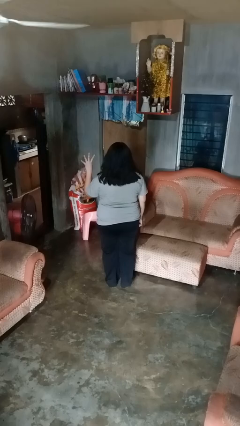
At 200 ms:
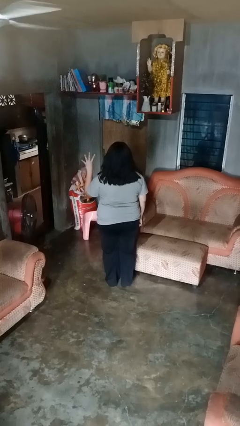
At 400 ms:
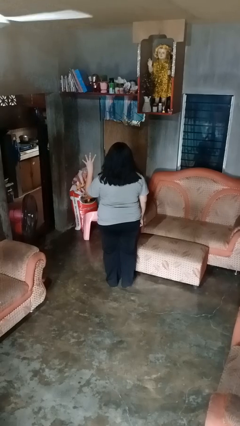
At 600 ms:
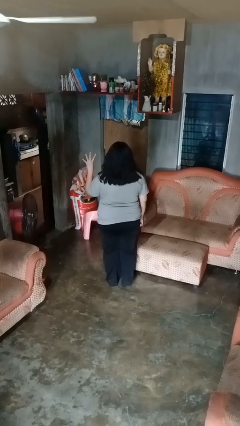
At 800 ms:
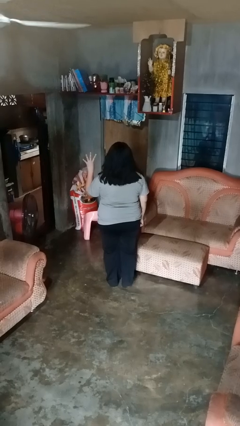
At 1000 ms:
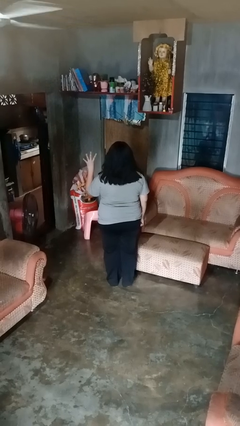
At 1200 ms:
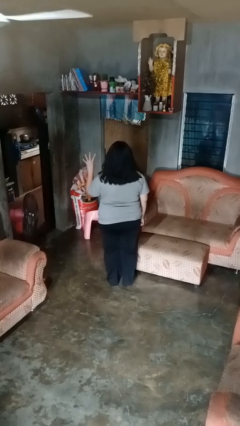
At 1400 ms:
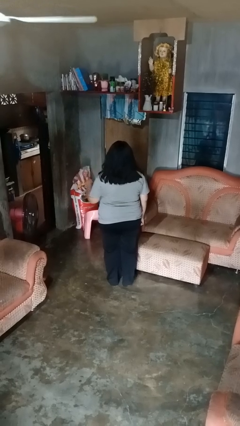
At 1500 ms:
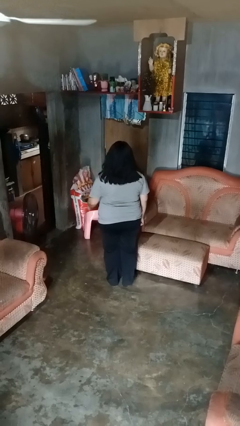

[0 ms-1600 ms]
person gestures number four

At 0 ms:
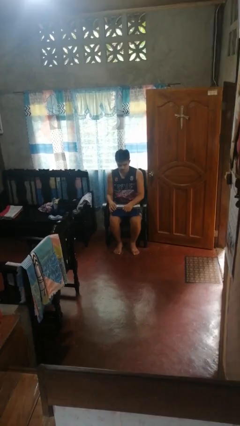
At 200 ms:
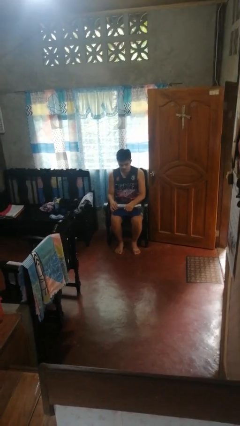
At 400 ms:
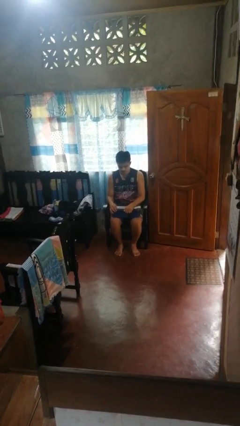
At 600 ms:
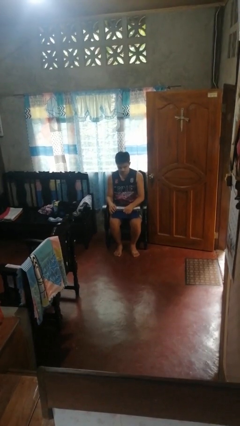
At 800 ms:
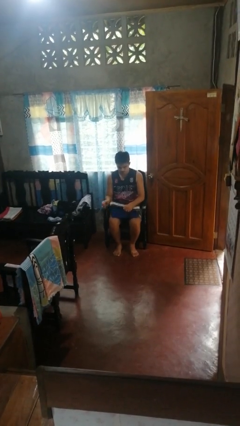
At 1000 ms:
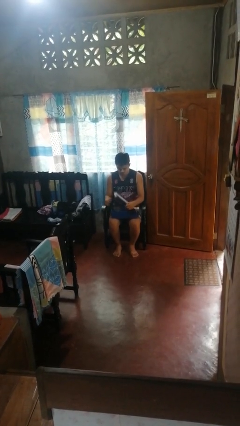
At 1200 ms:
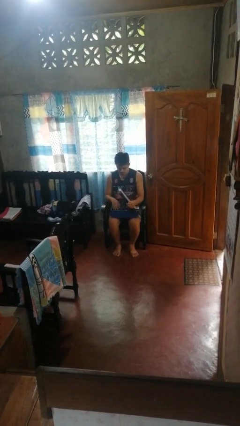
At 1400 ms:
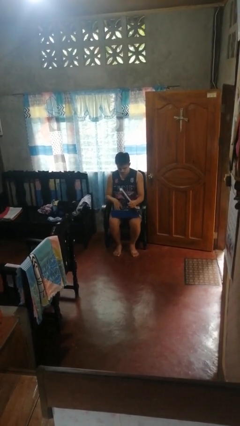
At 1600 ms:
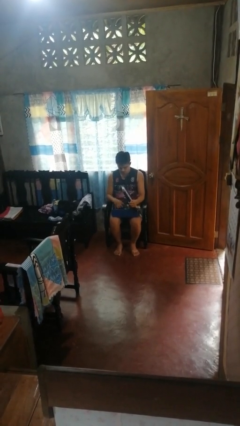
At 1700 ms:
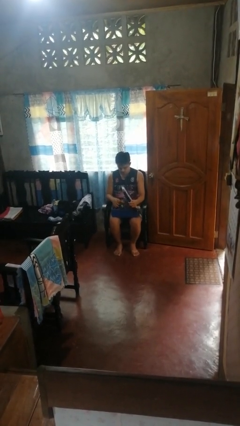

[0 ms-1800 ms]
person takes object from box

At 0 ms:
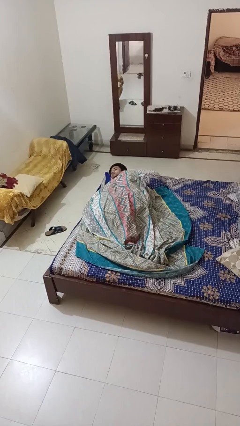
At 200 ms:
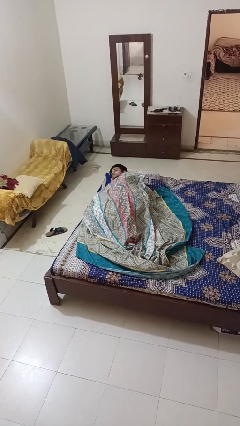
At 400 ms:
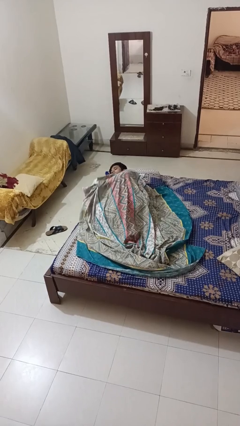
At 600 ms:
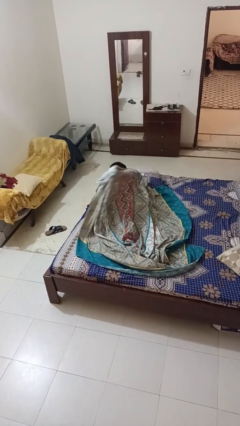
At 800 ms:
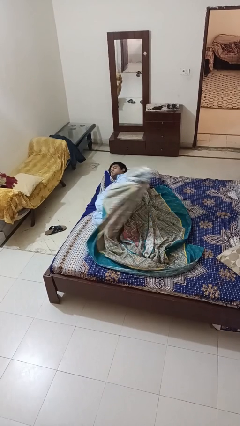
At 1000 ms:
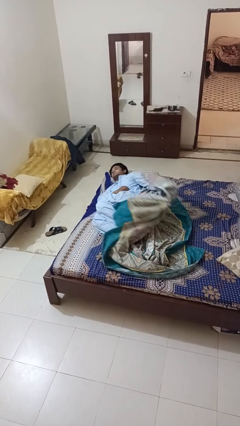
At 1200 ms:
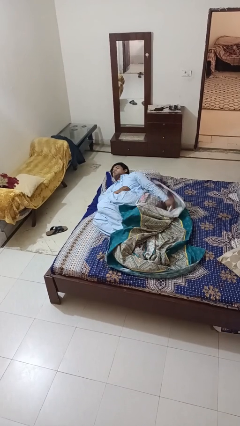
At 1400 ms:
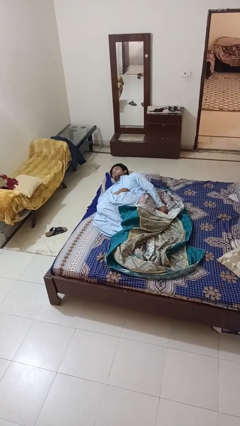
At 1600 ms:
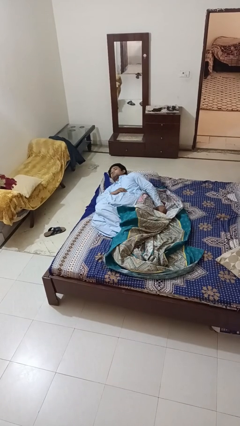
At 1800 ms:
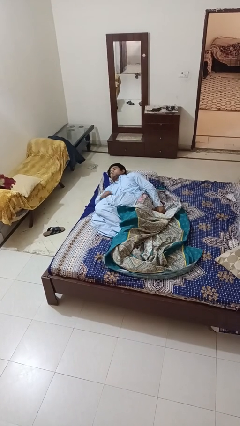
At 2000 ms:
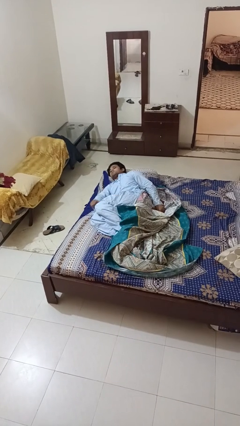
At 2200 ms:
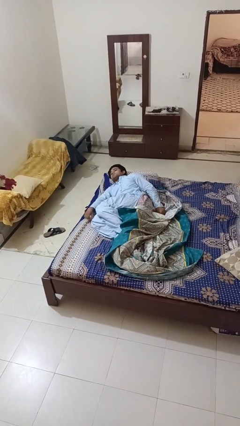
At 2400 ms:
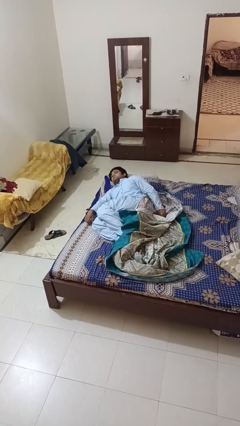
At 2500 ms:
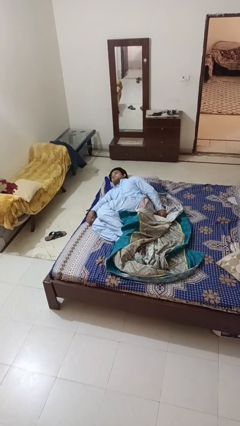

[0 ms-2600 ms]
person uncovers with bedsheets

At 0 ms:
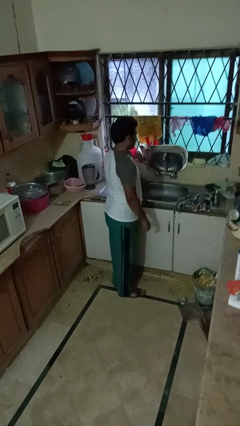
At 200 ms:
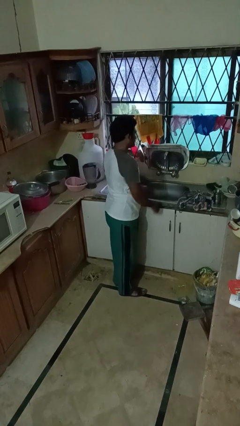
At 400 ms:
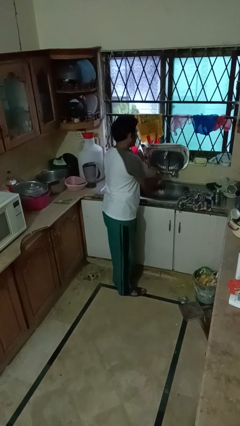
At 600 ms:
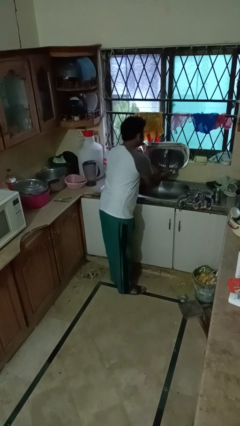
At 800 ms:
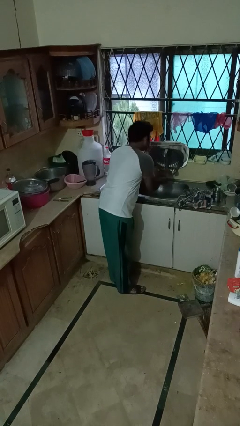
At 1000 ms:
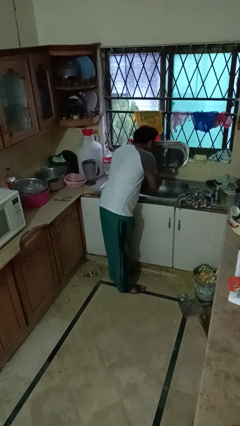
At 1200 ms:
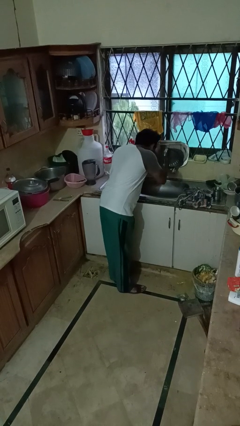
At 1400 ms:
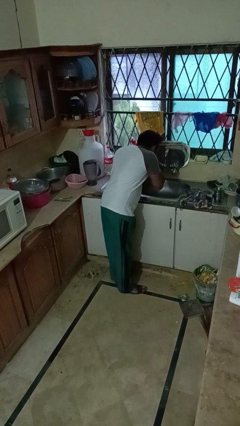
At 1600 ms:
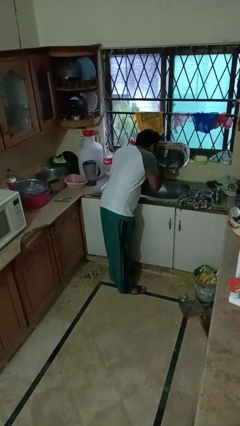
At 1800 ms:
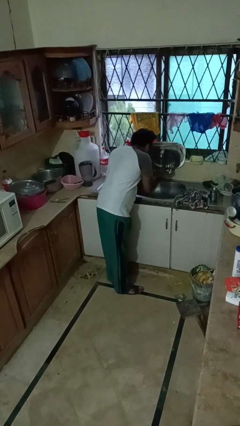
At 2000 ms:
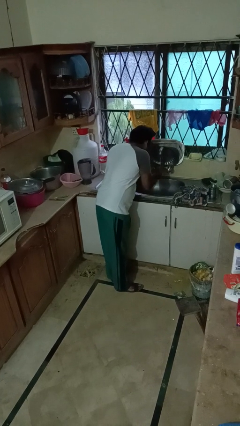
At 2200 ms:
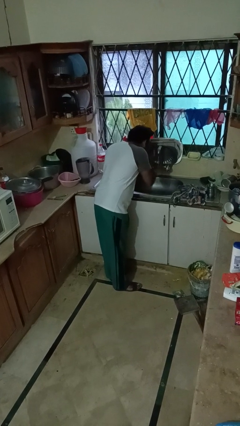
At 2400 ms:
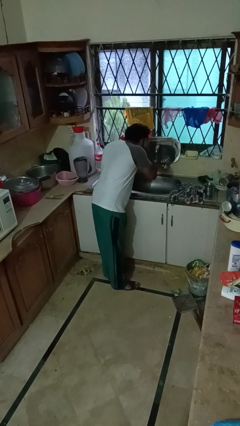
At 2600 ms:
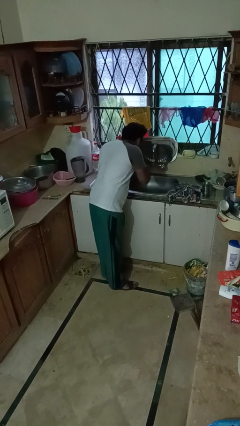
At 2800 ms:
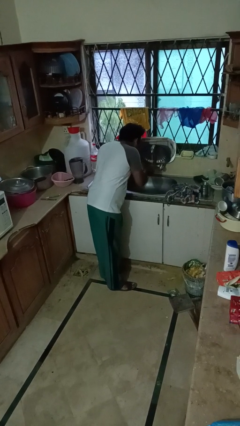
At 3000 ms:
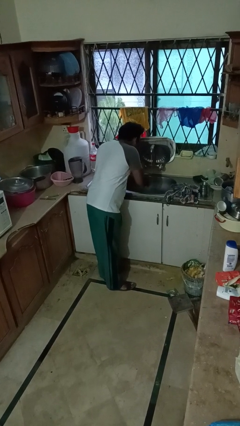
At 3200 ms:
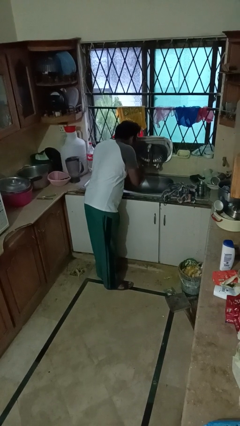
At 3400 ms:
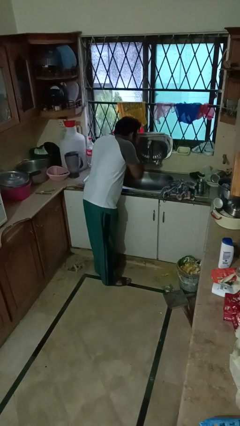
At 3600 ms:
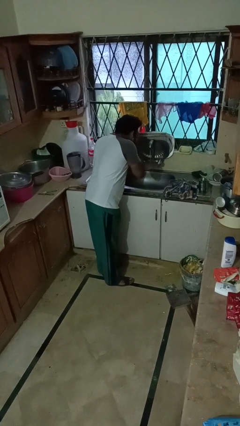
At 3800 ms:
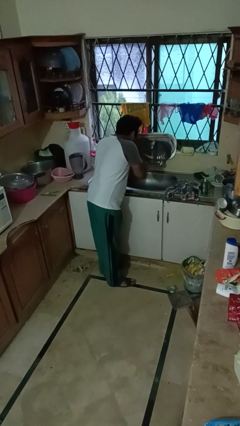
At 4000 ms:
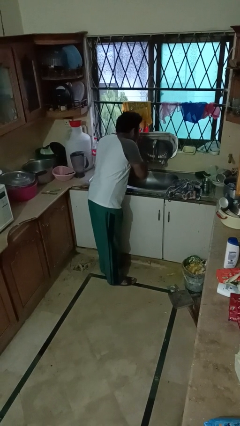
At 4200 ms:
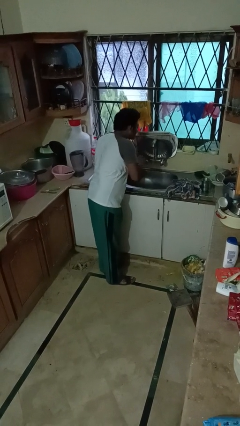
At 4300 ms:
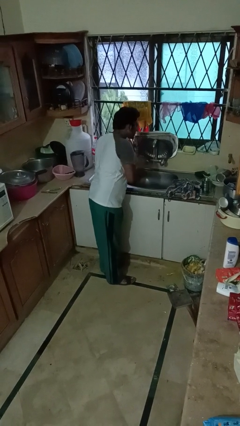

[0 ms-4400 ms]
person washes face

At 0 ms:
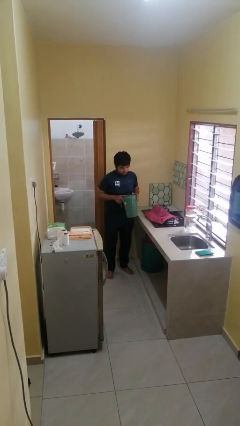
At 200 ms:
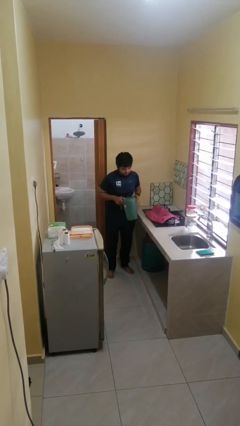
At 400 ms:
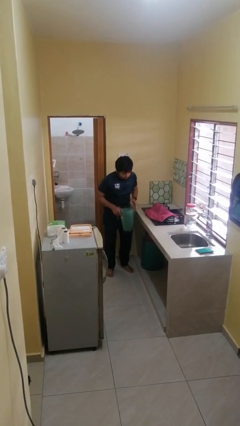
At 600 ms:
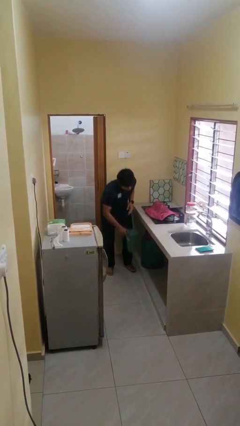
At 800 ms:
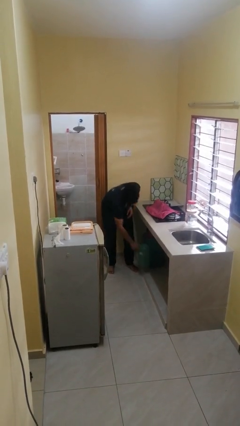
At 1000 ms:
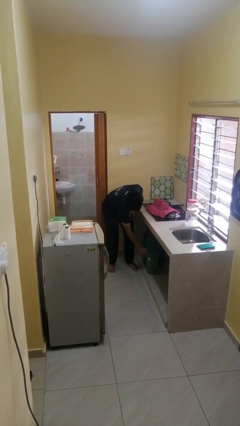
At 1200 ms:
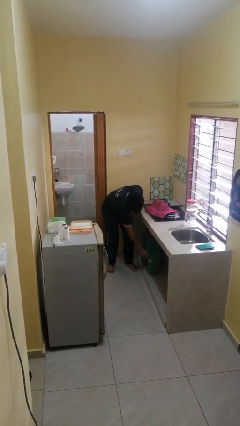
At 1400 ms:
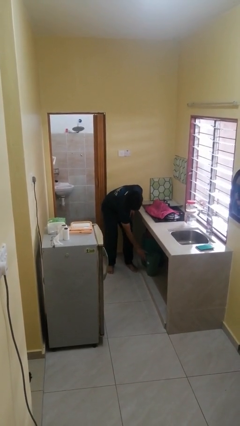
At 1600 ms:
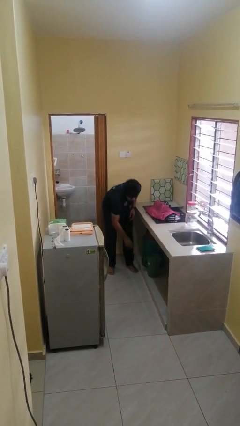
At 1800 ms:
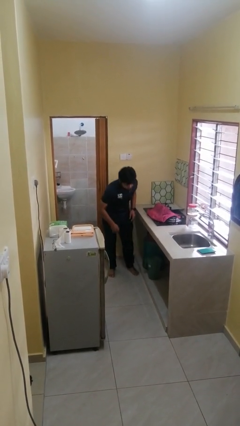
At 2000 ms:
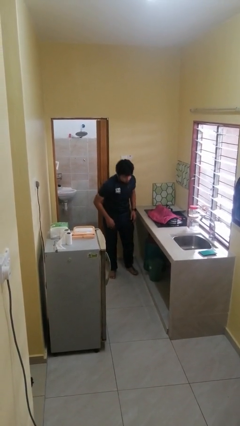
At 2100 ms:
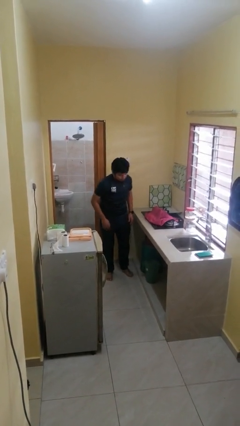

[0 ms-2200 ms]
person puts down object into cabinet

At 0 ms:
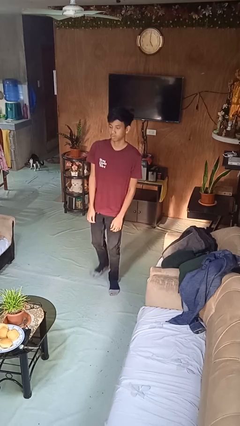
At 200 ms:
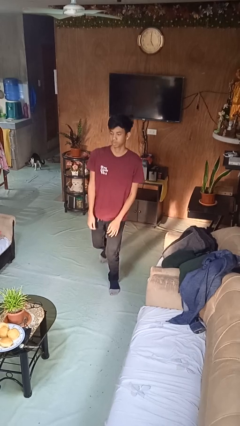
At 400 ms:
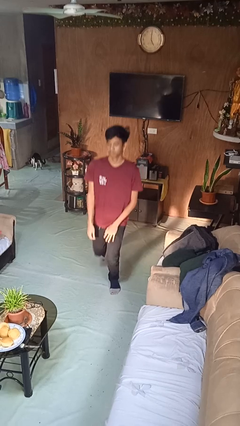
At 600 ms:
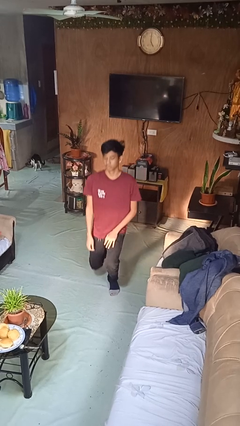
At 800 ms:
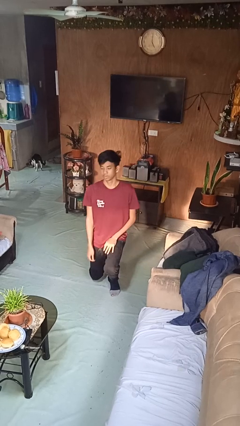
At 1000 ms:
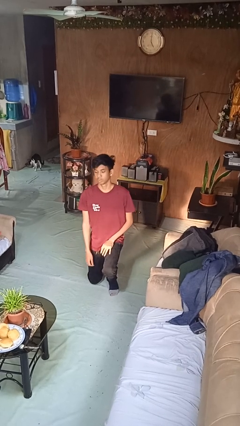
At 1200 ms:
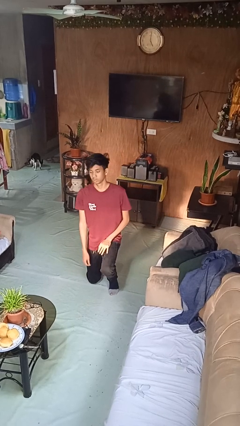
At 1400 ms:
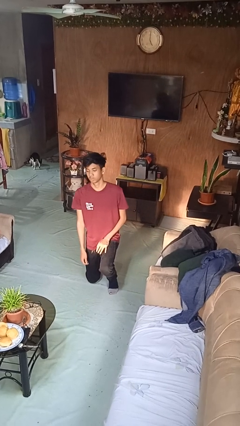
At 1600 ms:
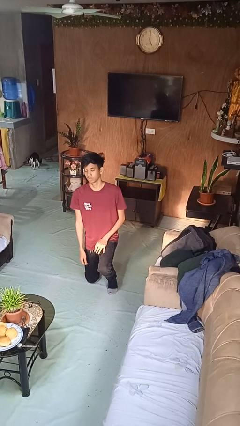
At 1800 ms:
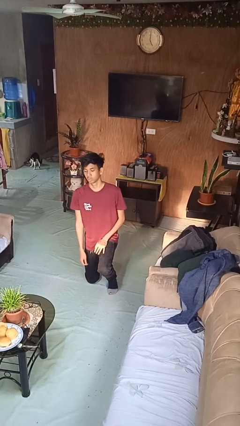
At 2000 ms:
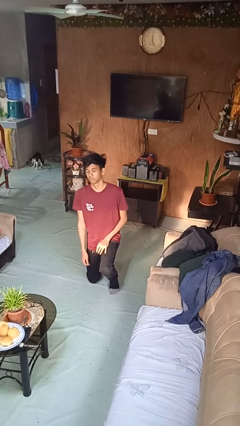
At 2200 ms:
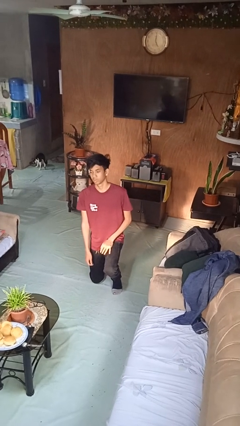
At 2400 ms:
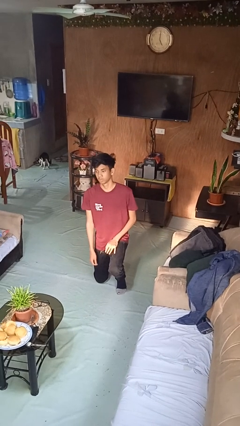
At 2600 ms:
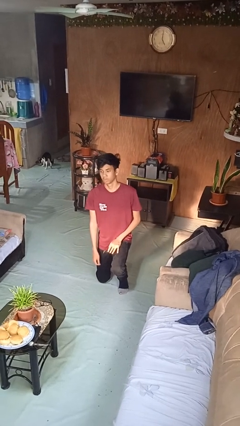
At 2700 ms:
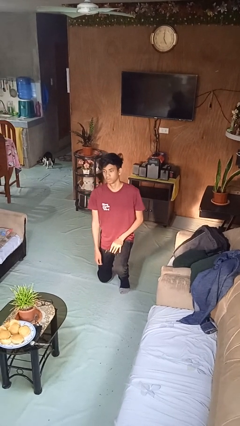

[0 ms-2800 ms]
person kneels

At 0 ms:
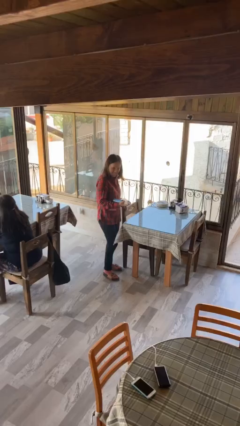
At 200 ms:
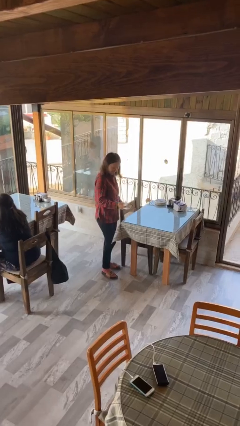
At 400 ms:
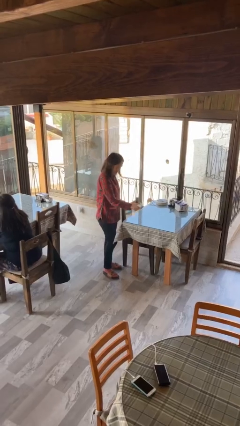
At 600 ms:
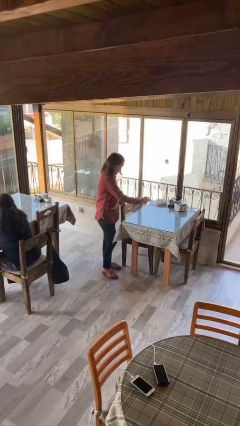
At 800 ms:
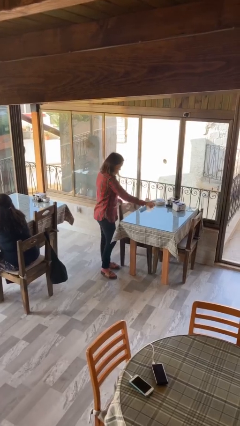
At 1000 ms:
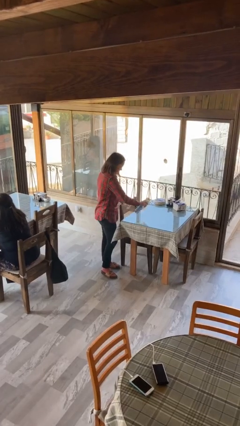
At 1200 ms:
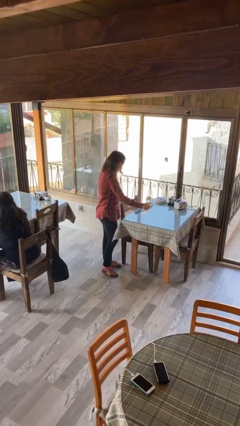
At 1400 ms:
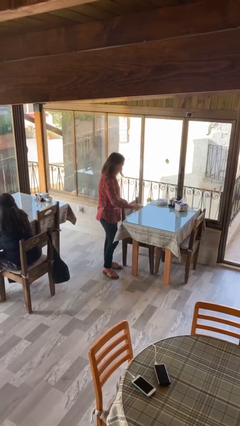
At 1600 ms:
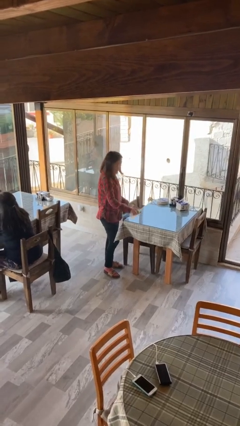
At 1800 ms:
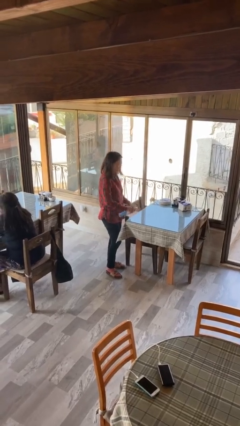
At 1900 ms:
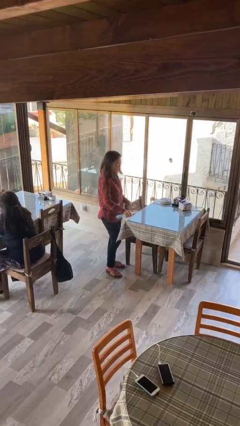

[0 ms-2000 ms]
person sprays from bottle
